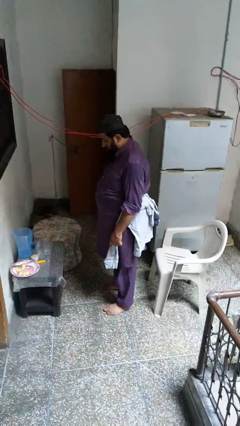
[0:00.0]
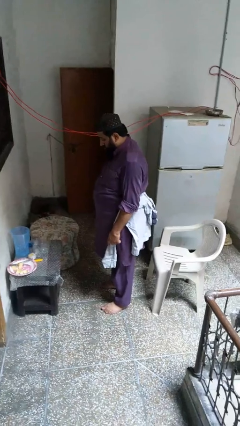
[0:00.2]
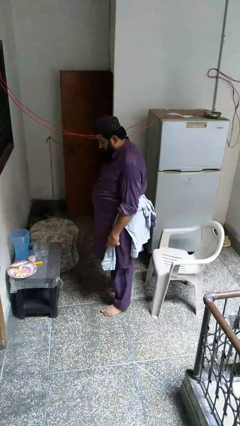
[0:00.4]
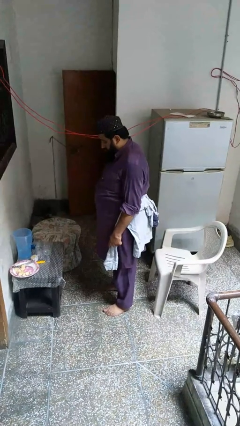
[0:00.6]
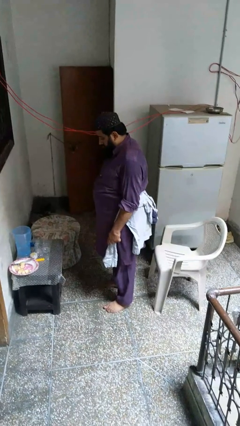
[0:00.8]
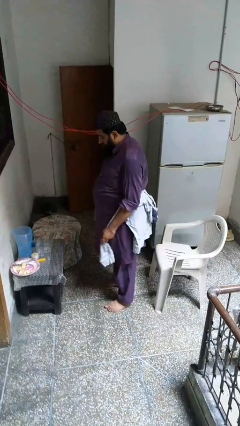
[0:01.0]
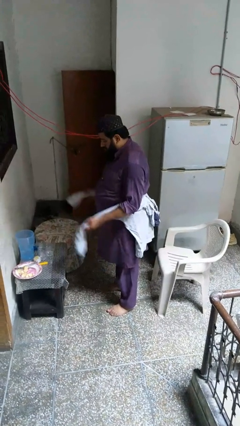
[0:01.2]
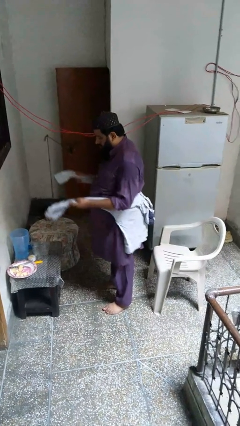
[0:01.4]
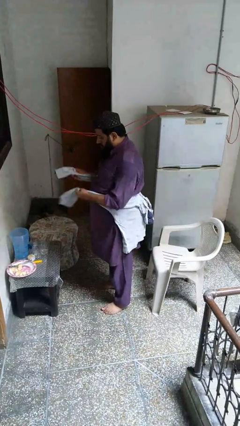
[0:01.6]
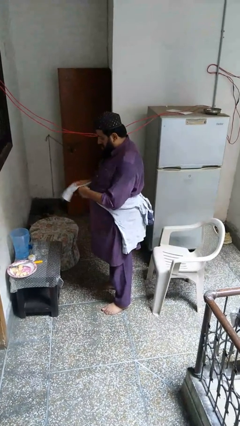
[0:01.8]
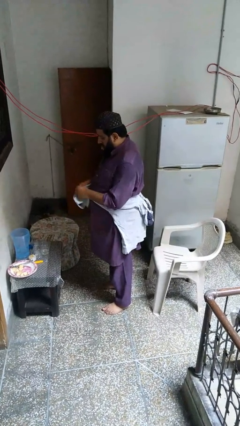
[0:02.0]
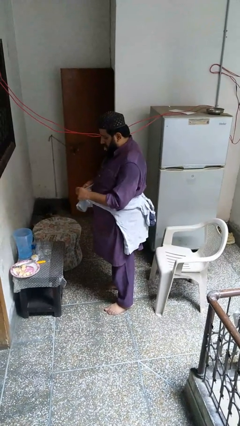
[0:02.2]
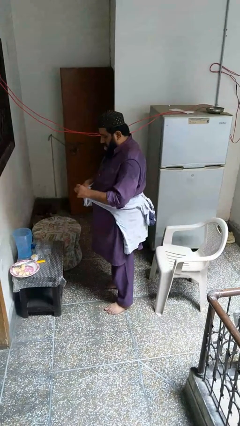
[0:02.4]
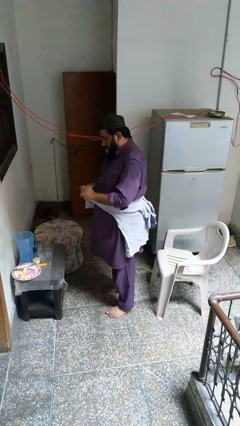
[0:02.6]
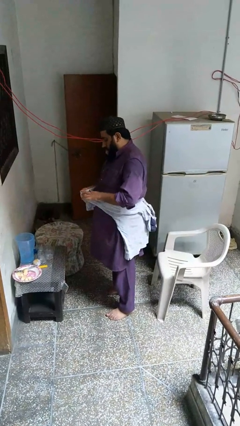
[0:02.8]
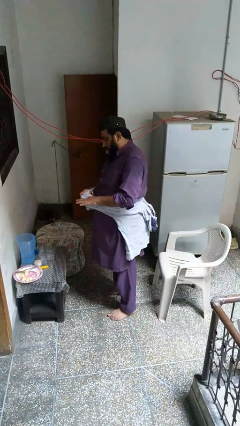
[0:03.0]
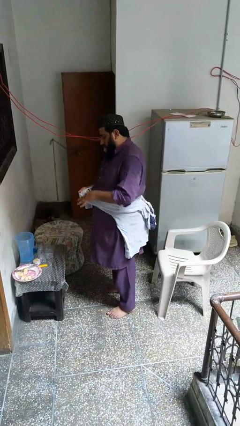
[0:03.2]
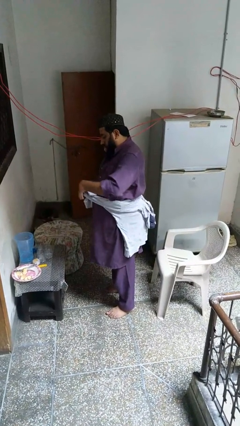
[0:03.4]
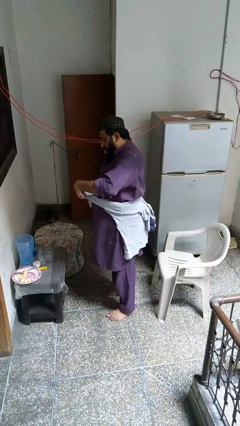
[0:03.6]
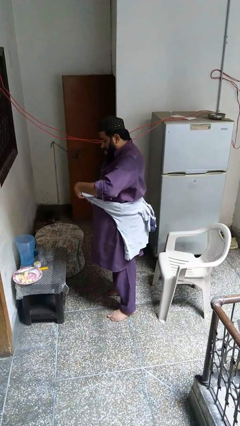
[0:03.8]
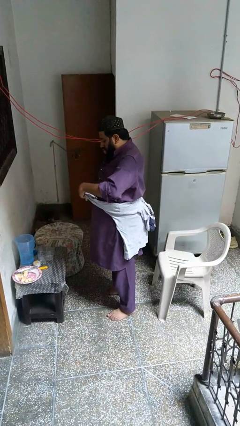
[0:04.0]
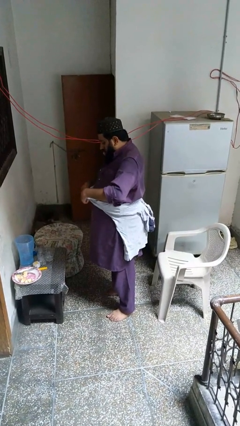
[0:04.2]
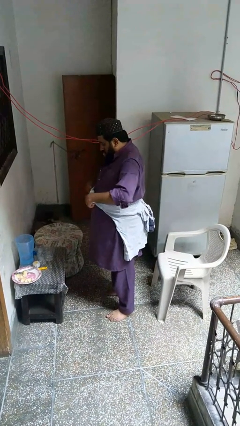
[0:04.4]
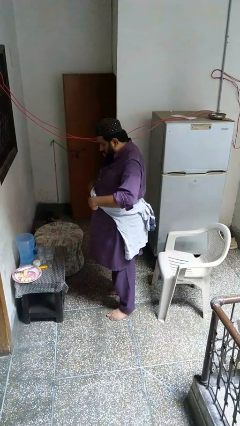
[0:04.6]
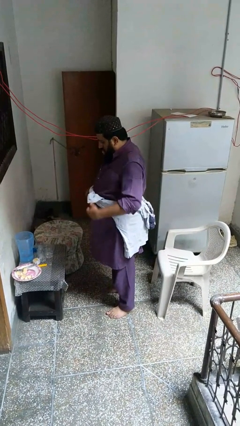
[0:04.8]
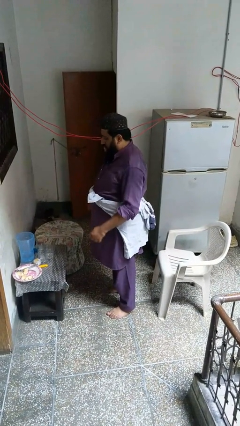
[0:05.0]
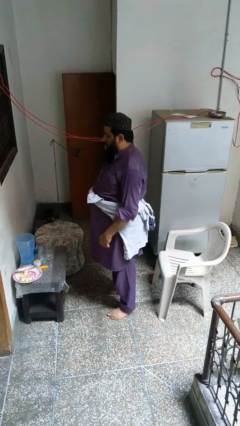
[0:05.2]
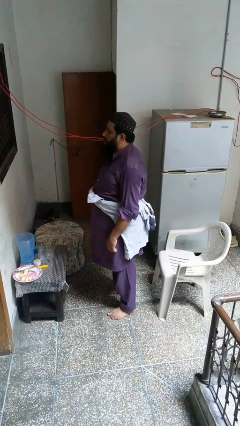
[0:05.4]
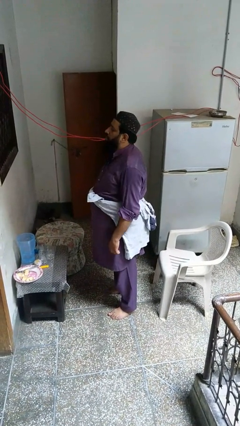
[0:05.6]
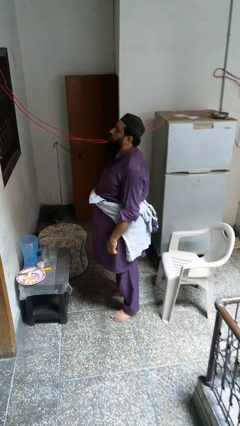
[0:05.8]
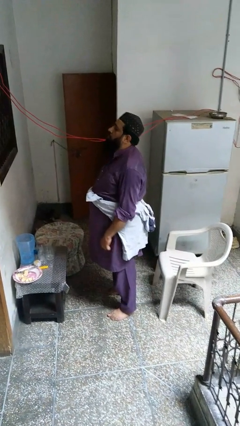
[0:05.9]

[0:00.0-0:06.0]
person ties jacket around waist

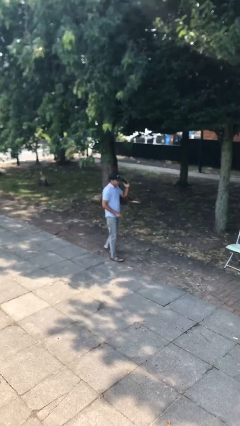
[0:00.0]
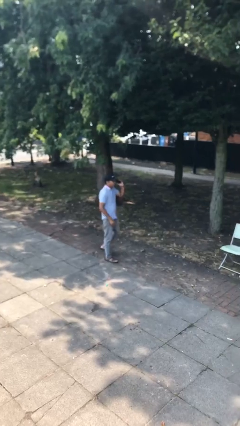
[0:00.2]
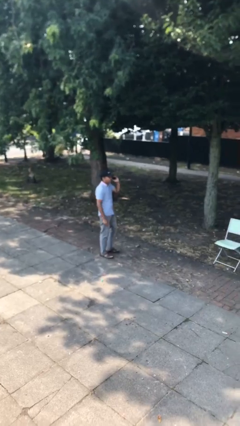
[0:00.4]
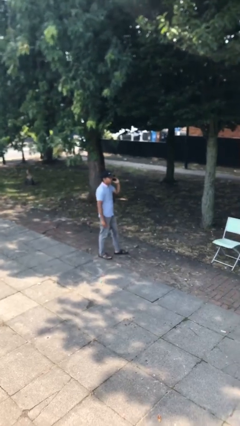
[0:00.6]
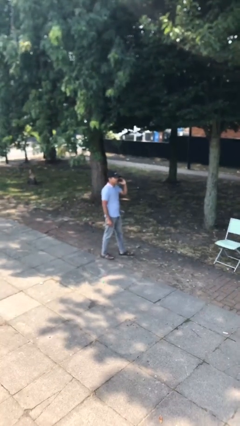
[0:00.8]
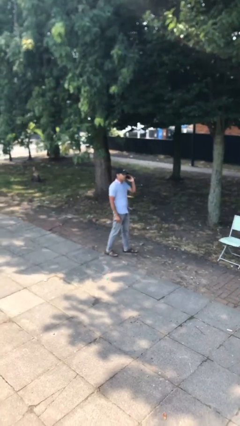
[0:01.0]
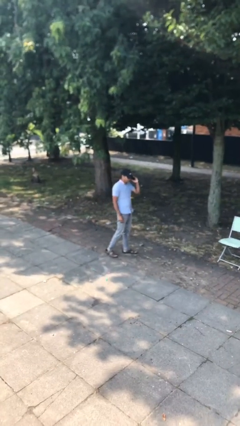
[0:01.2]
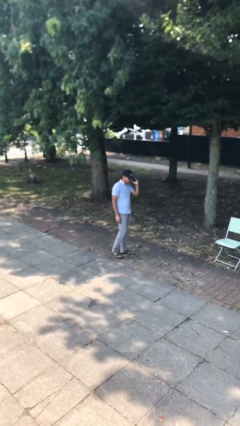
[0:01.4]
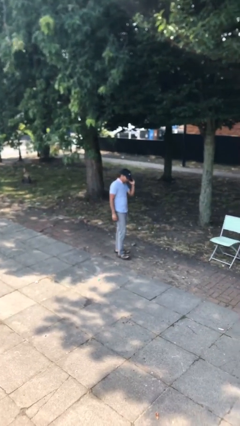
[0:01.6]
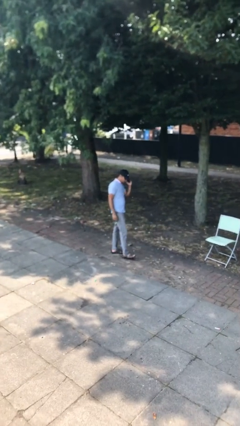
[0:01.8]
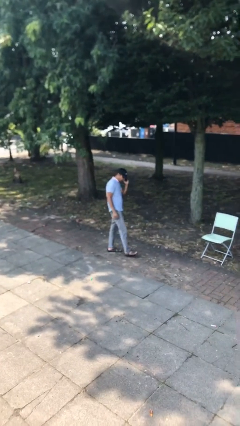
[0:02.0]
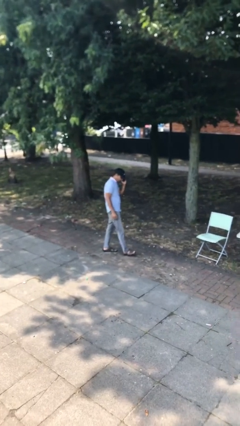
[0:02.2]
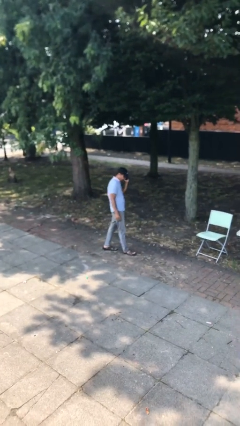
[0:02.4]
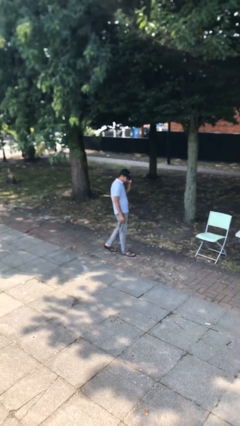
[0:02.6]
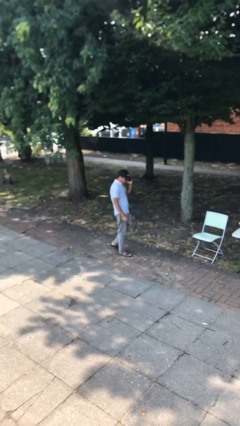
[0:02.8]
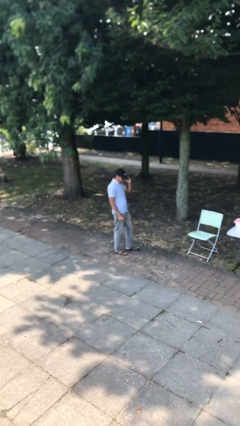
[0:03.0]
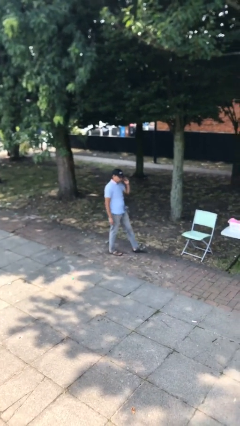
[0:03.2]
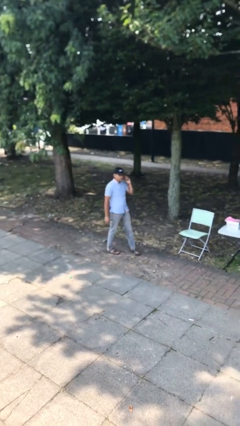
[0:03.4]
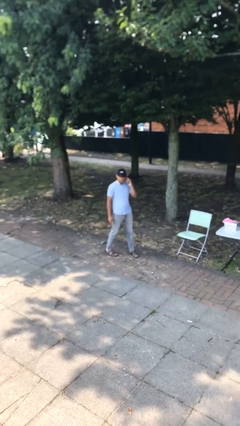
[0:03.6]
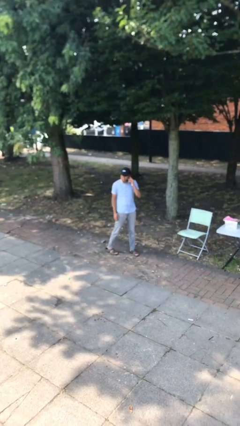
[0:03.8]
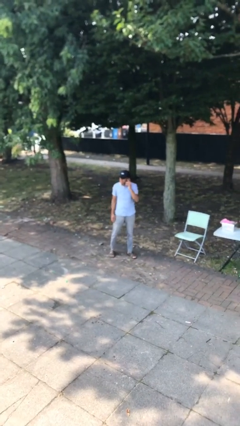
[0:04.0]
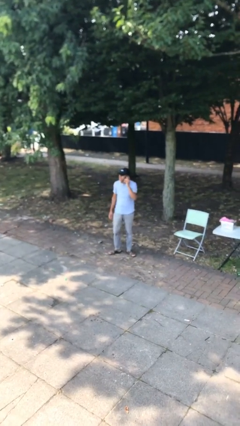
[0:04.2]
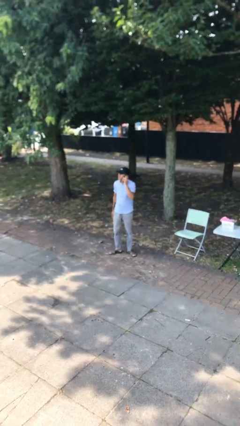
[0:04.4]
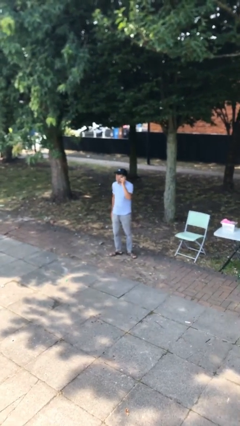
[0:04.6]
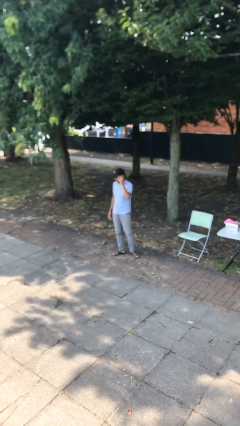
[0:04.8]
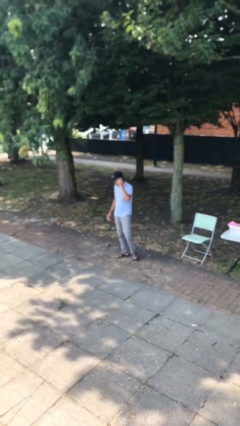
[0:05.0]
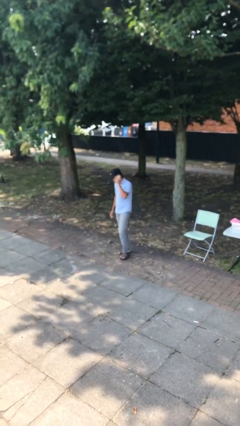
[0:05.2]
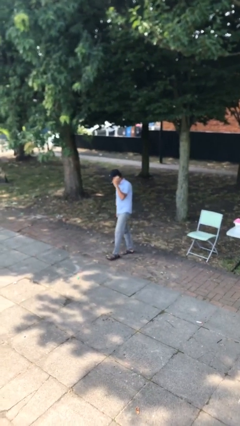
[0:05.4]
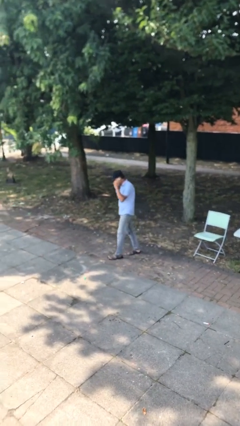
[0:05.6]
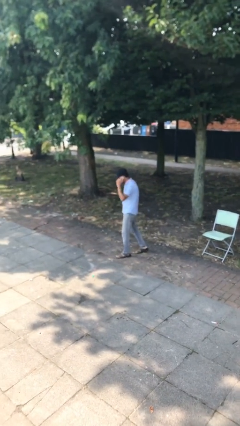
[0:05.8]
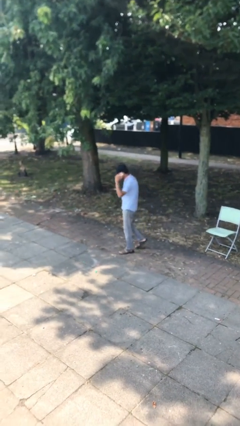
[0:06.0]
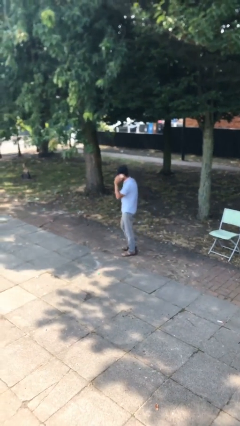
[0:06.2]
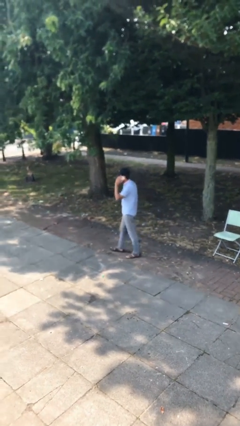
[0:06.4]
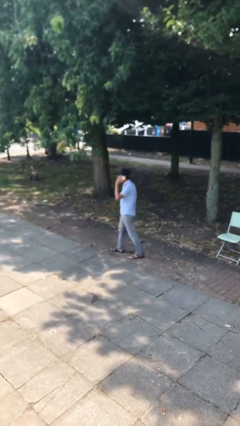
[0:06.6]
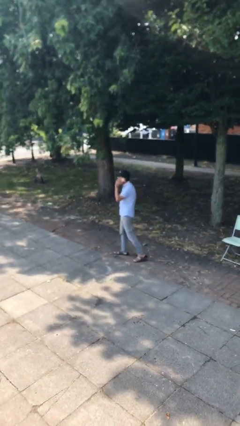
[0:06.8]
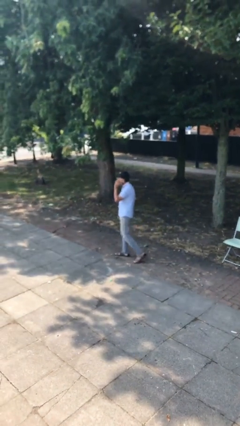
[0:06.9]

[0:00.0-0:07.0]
person talks on phone

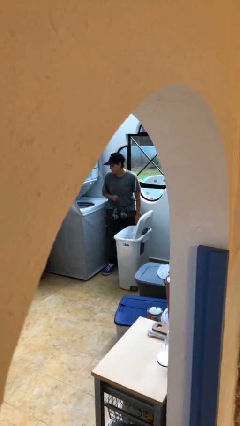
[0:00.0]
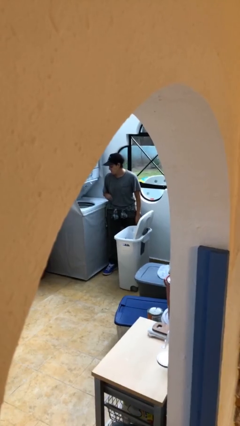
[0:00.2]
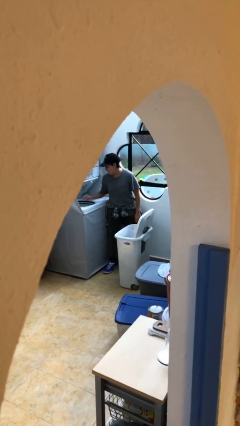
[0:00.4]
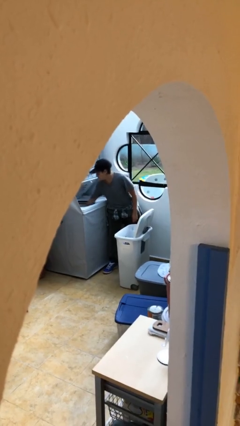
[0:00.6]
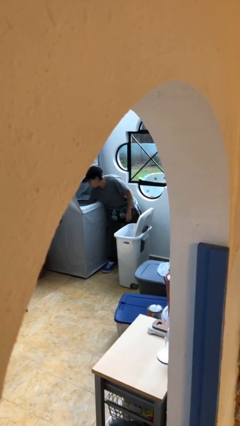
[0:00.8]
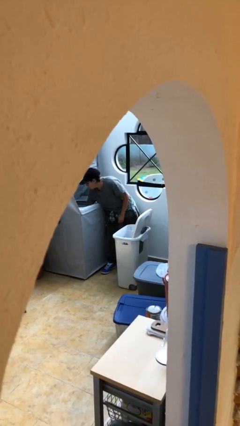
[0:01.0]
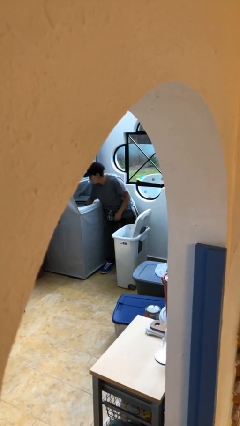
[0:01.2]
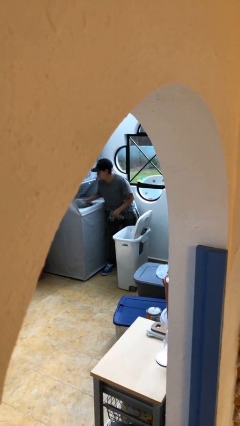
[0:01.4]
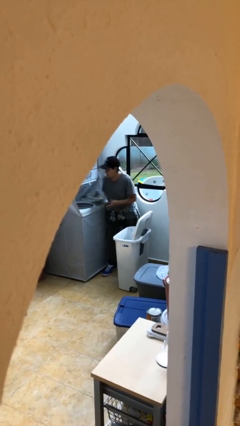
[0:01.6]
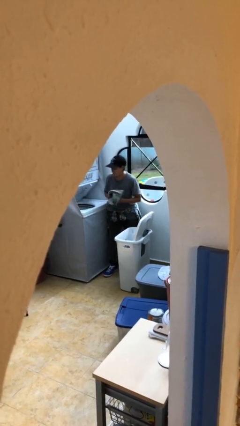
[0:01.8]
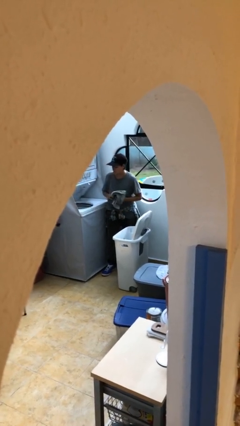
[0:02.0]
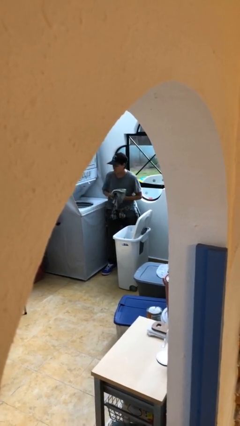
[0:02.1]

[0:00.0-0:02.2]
person loads clotheswasher

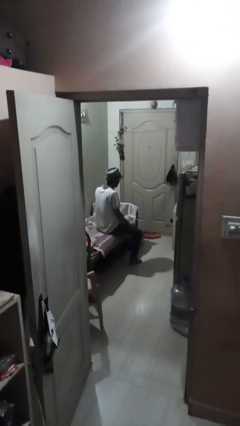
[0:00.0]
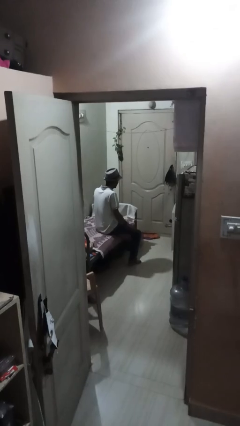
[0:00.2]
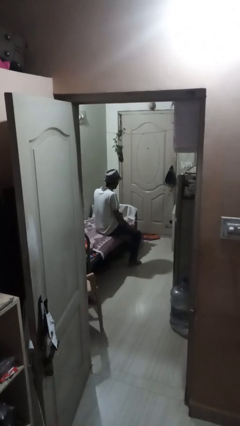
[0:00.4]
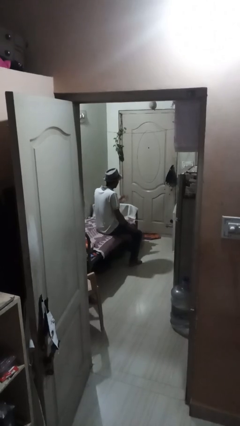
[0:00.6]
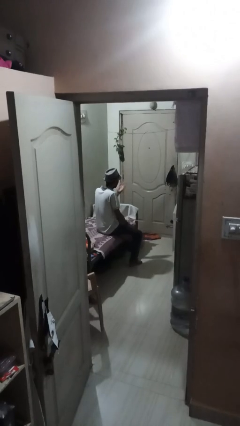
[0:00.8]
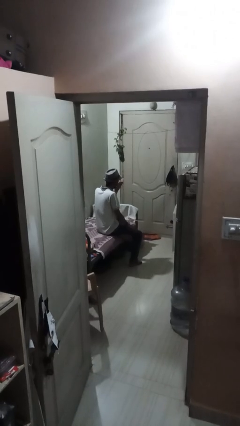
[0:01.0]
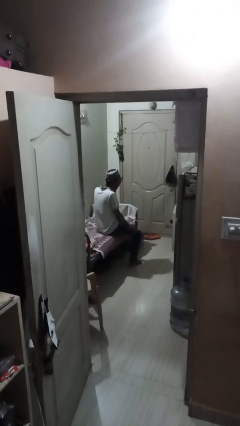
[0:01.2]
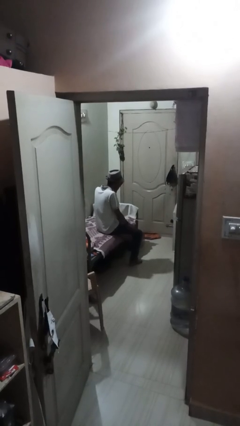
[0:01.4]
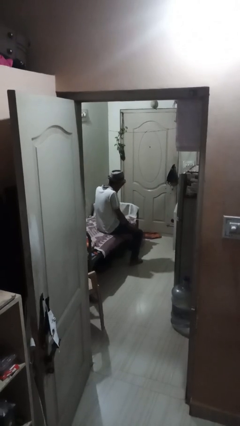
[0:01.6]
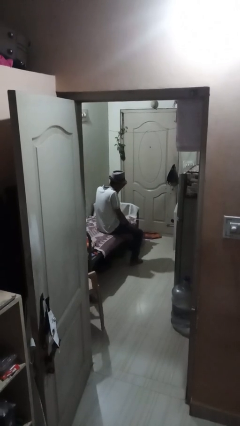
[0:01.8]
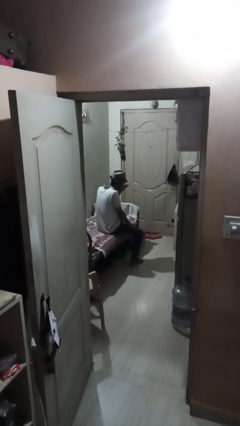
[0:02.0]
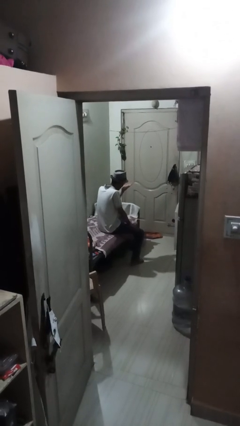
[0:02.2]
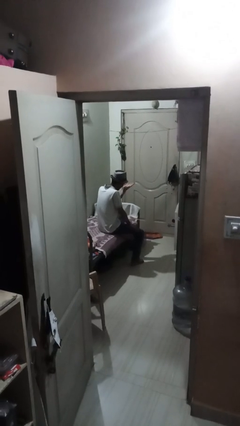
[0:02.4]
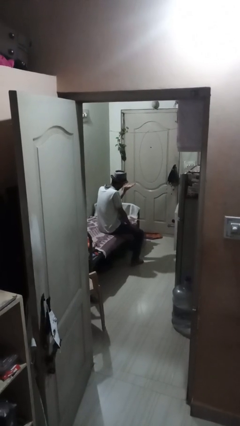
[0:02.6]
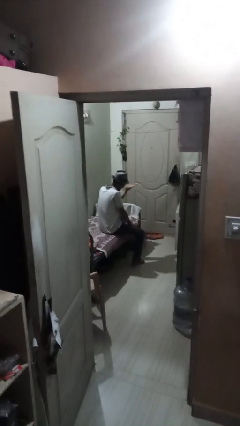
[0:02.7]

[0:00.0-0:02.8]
person gestures blow kiss
